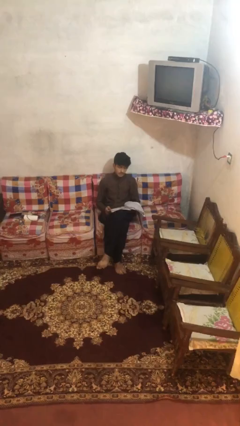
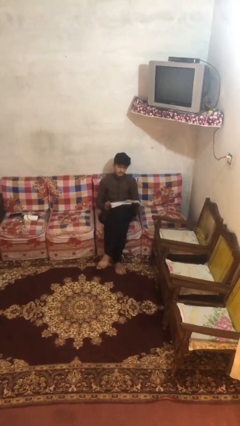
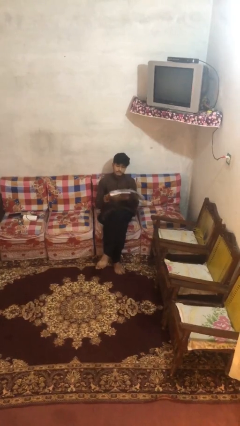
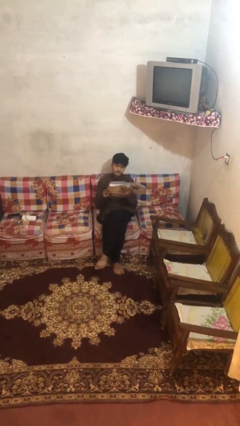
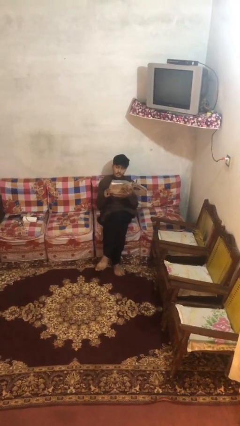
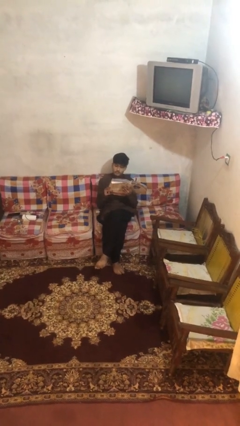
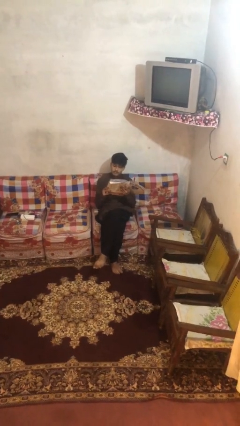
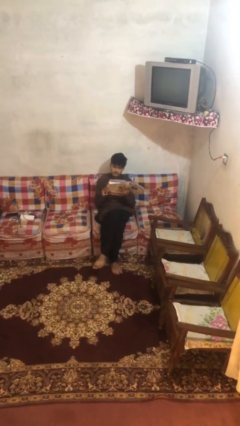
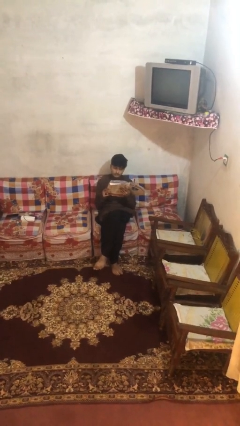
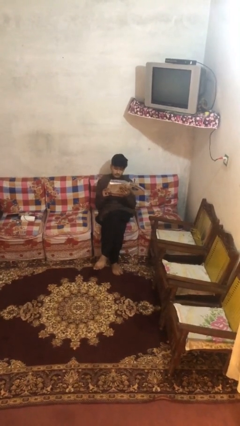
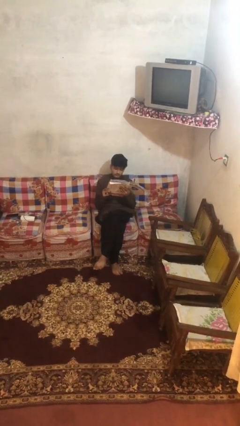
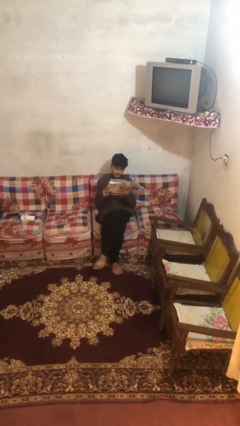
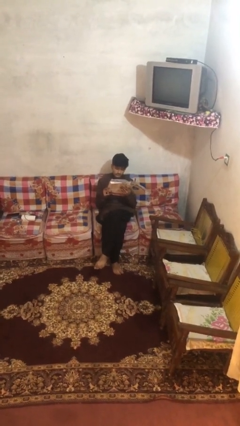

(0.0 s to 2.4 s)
person reads document

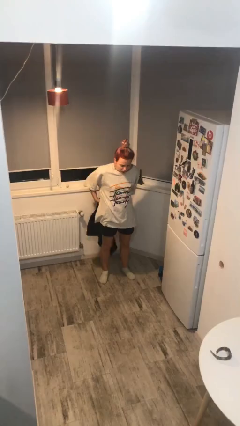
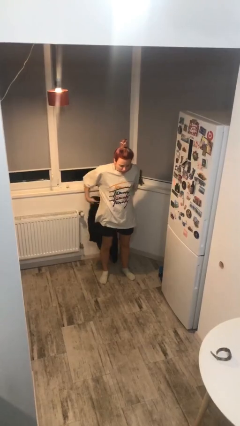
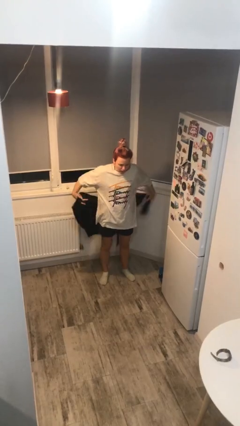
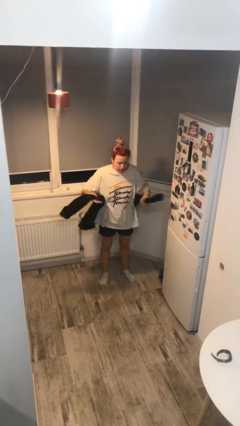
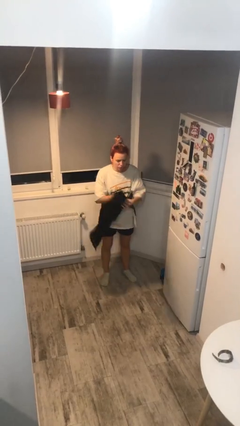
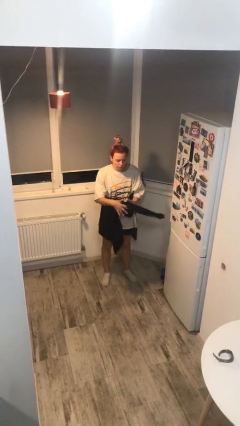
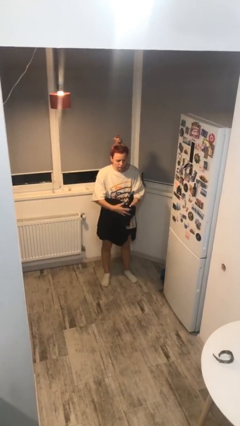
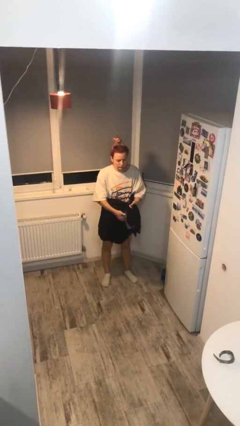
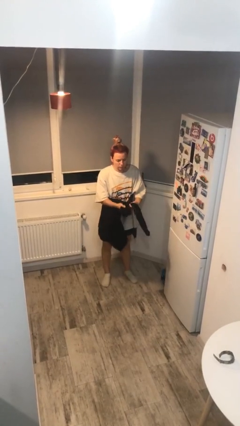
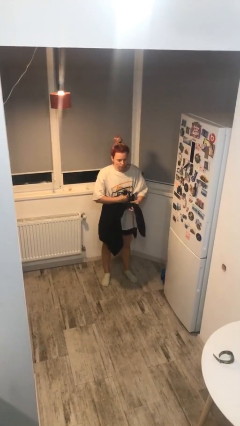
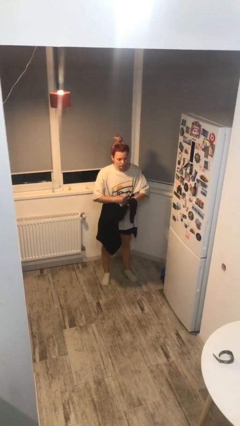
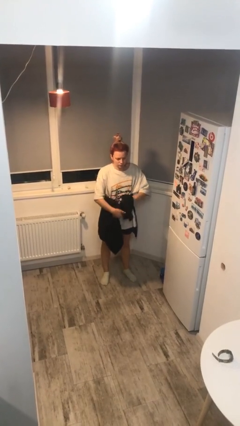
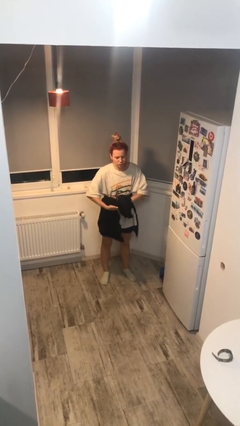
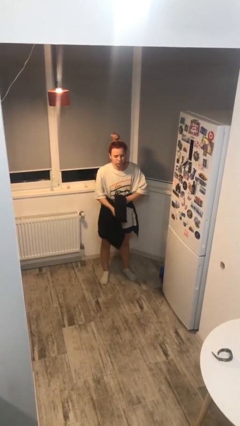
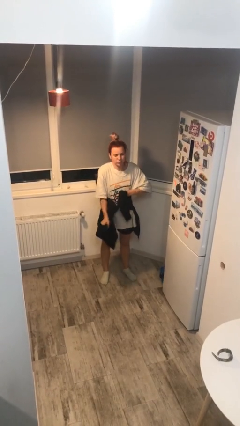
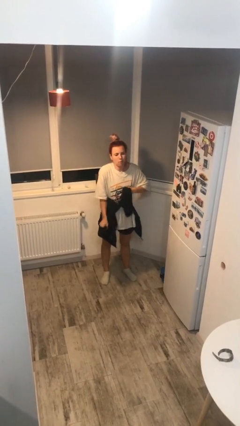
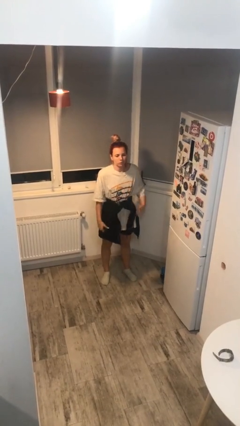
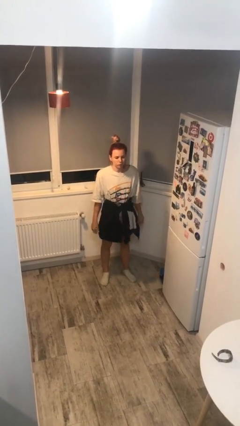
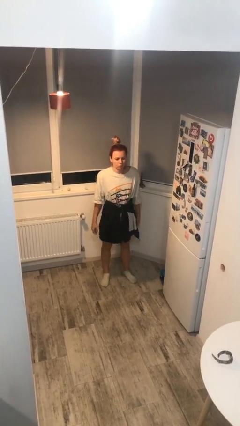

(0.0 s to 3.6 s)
person ties jacket around waist

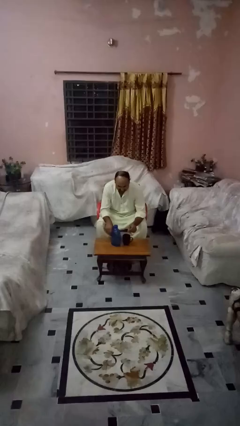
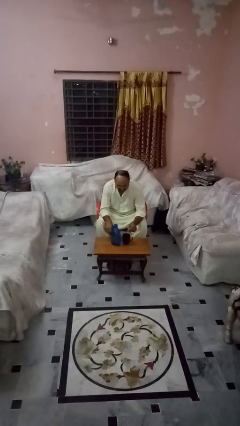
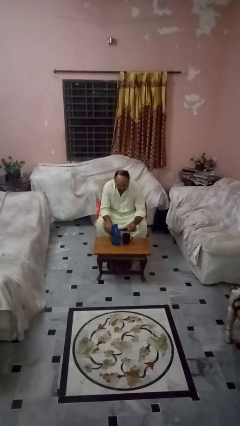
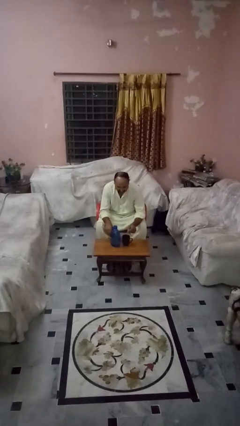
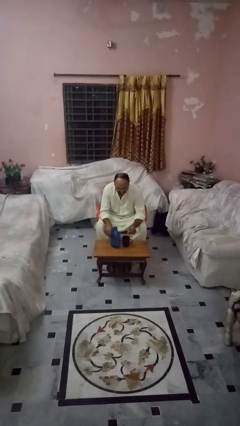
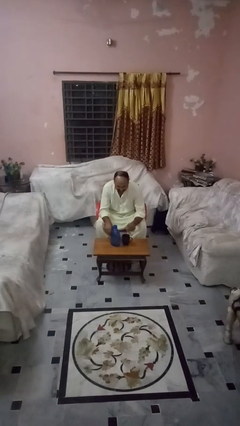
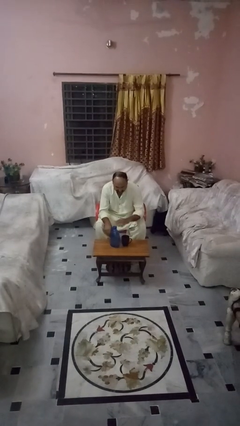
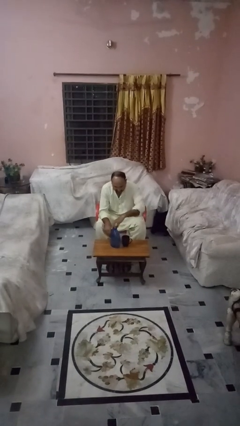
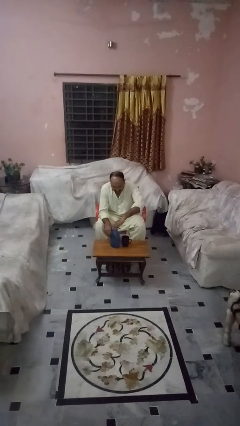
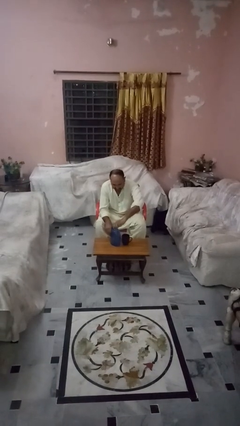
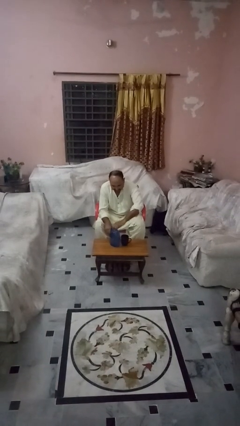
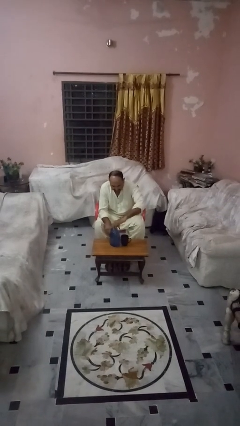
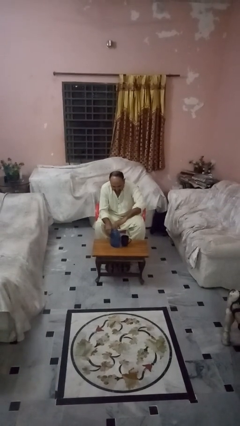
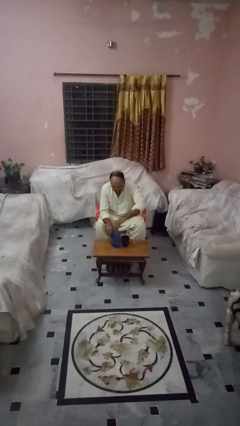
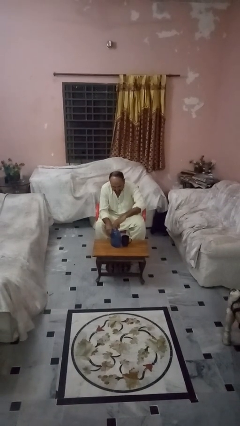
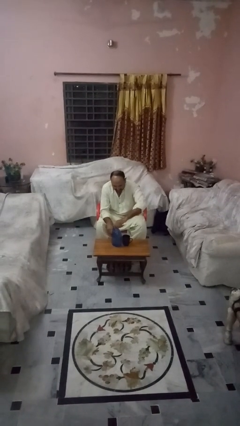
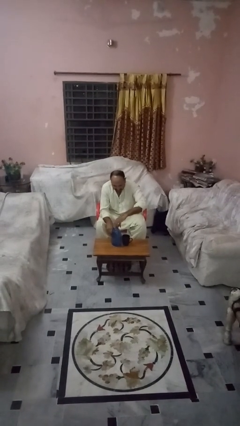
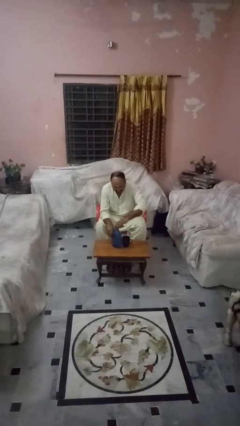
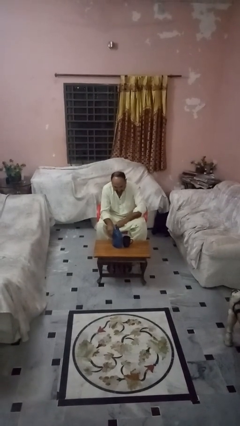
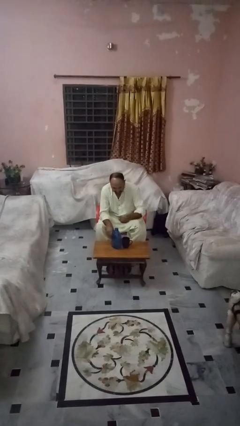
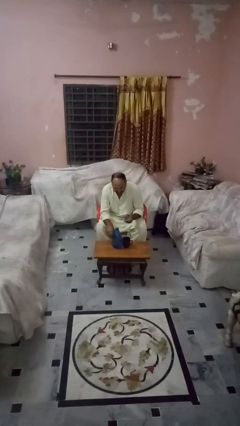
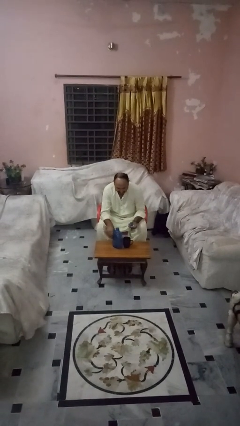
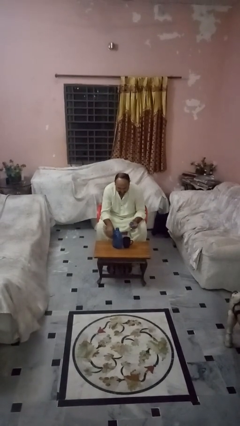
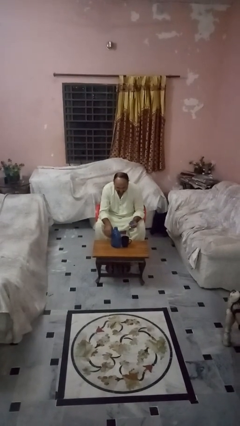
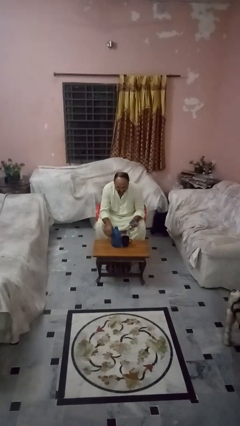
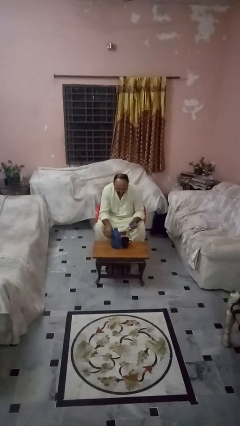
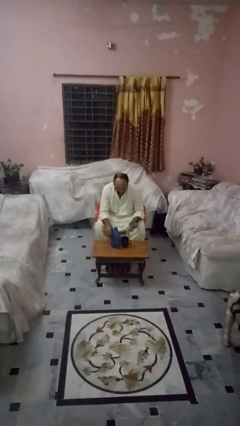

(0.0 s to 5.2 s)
person unscrews lid from bottle

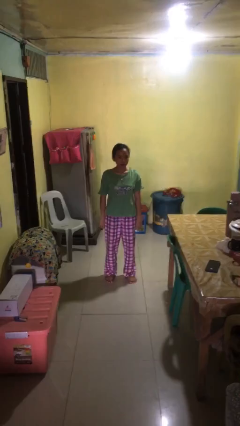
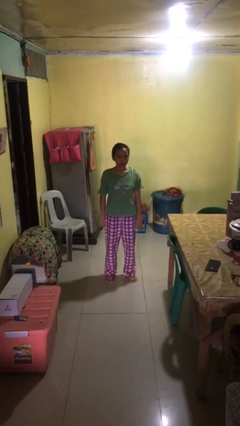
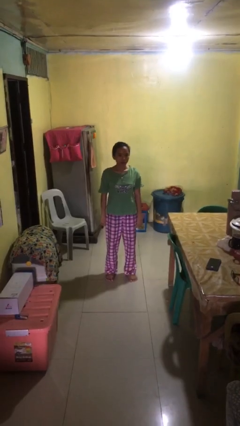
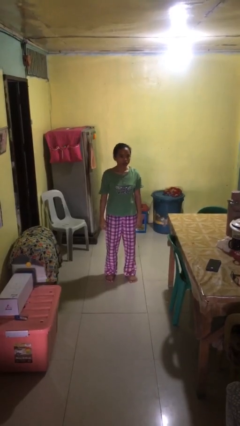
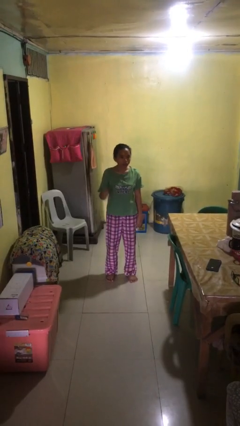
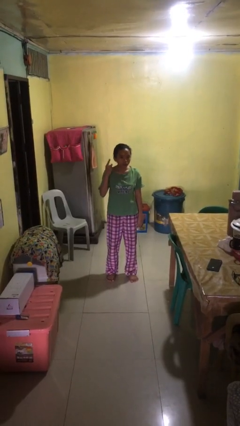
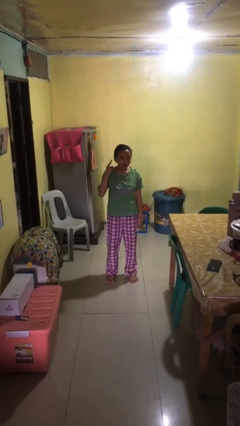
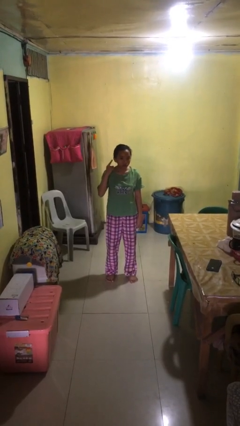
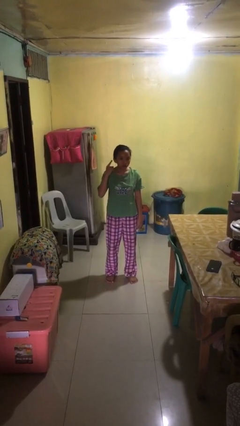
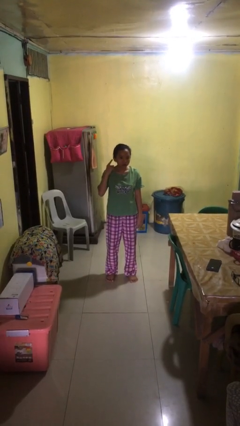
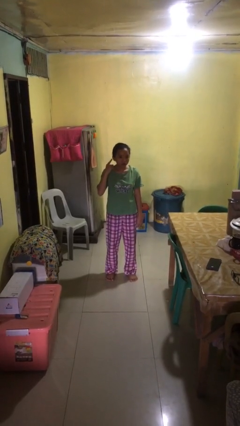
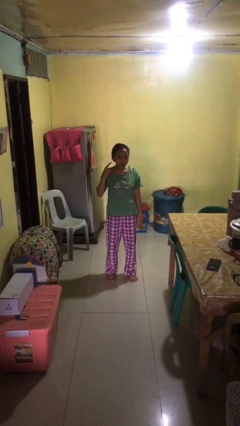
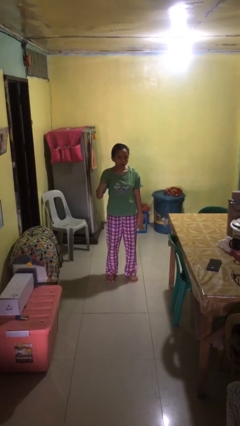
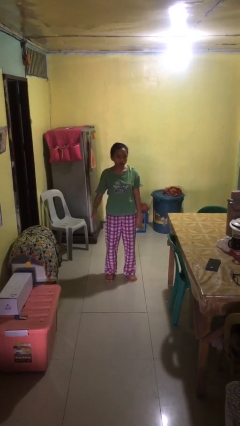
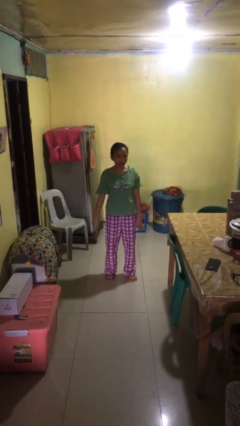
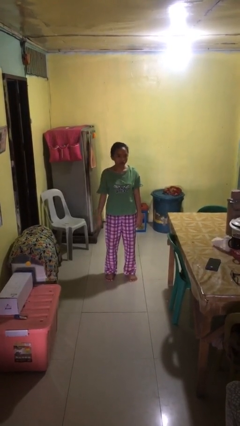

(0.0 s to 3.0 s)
person gestures listen closely

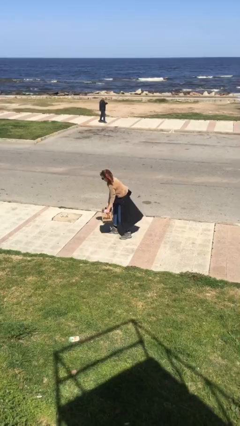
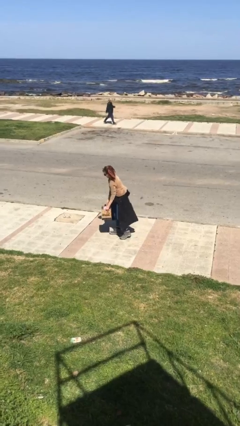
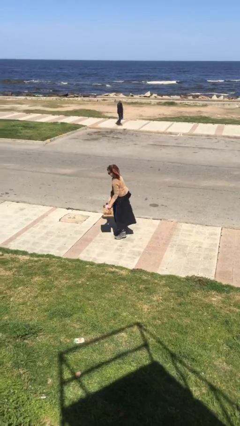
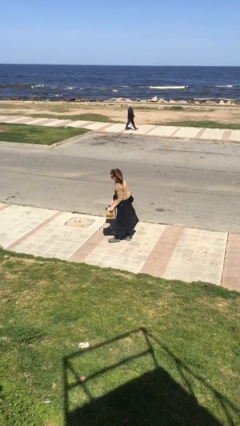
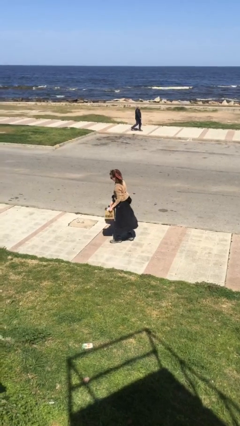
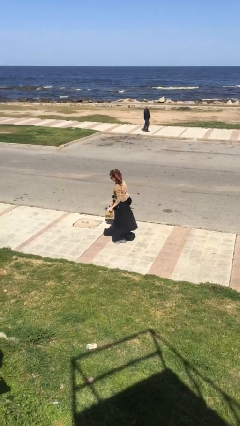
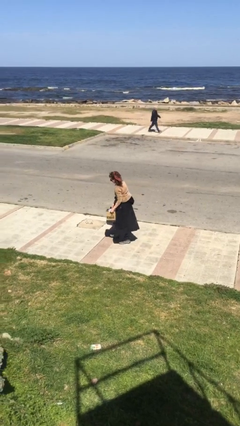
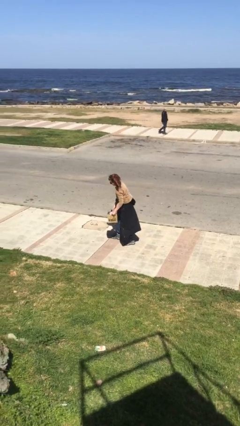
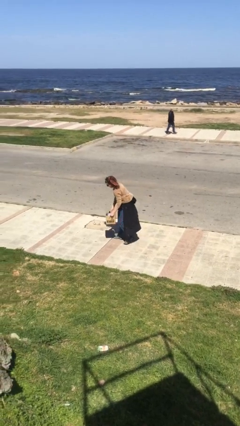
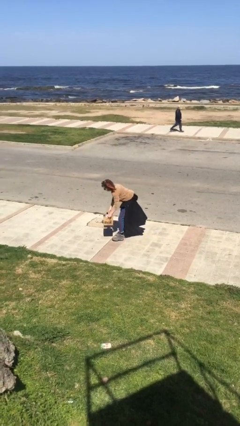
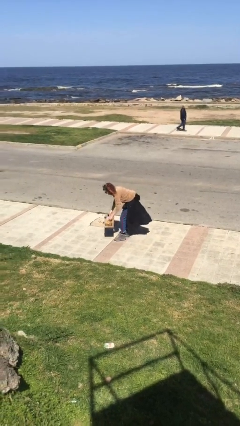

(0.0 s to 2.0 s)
person carries heavy object

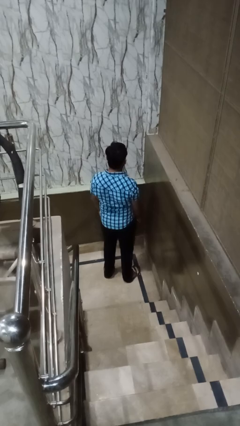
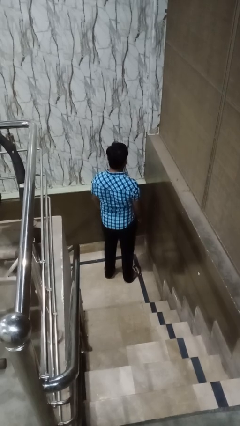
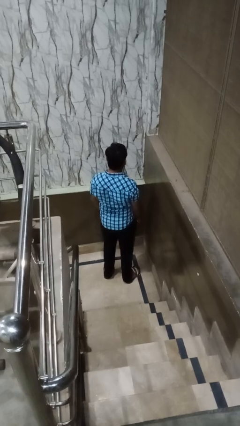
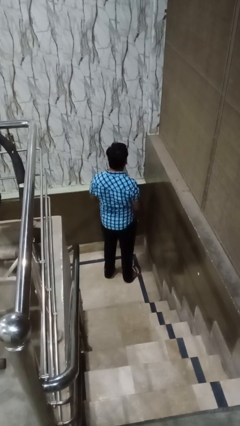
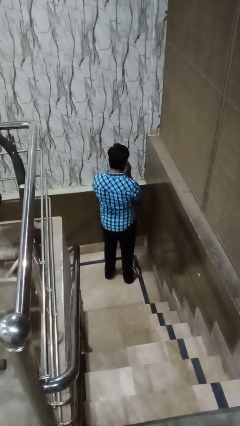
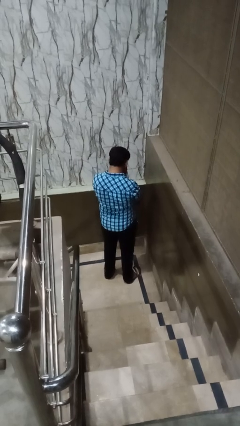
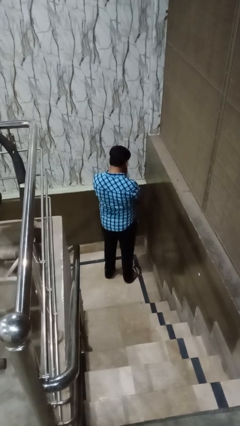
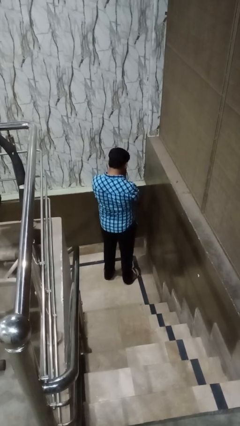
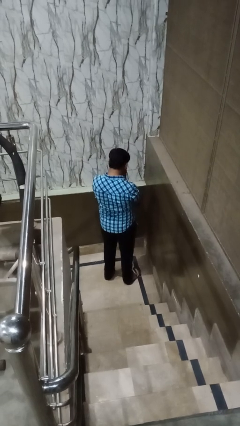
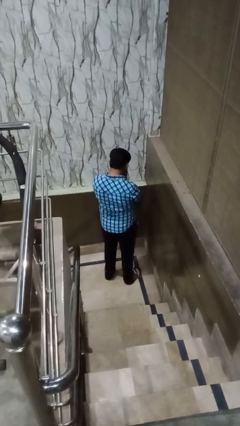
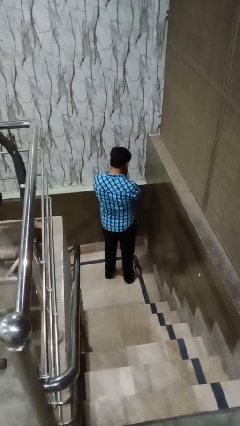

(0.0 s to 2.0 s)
person sneezes into hand
